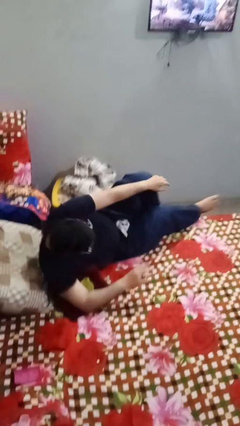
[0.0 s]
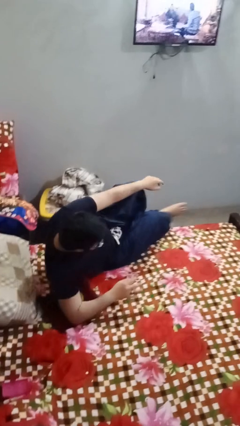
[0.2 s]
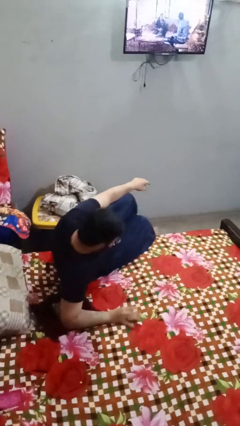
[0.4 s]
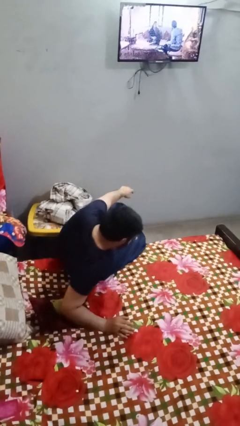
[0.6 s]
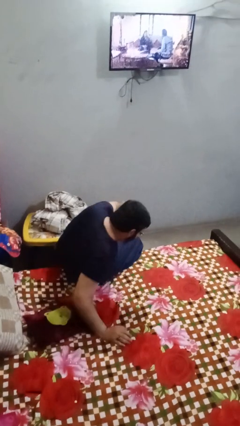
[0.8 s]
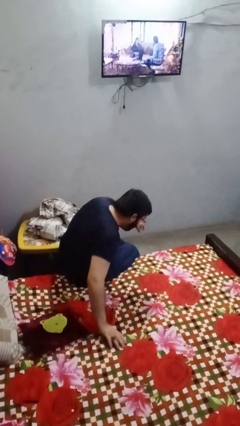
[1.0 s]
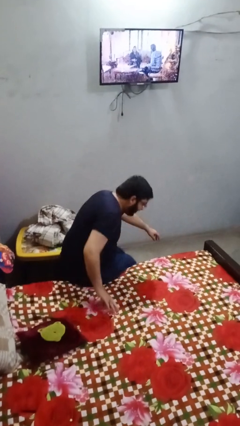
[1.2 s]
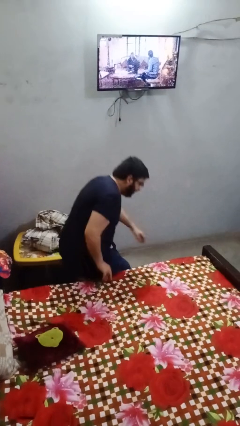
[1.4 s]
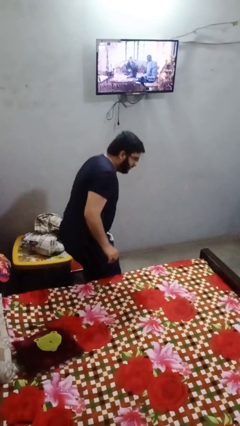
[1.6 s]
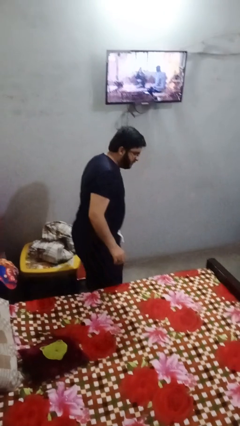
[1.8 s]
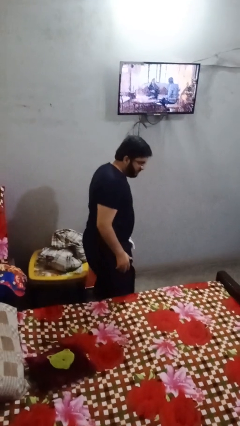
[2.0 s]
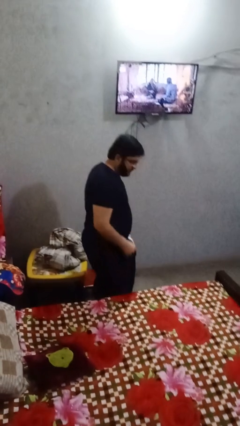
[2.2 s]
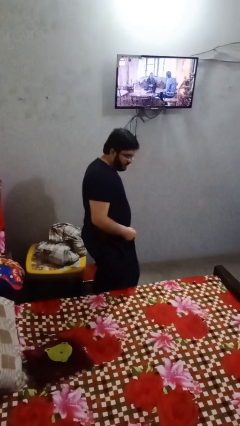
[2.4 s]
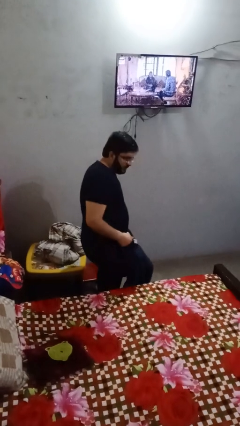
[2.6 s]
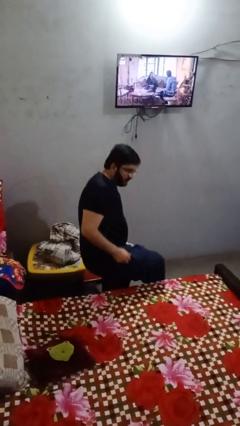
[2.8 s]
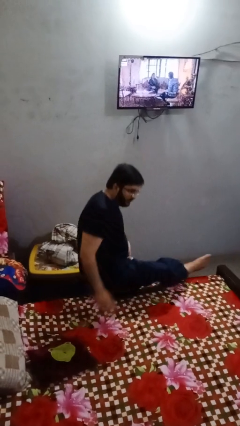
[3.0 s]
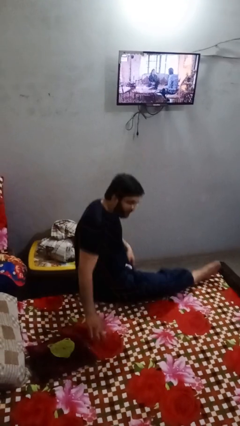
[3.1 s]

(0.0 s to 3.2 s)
person stands up

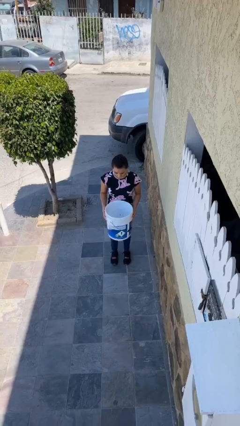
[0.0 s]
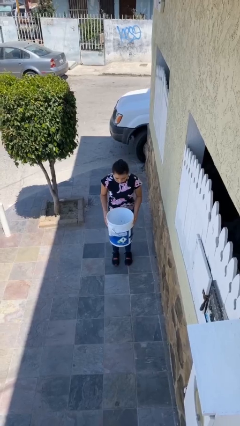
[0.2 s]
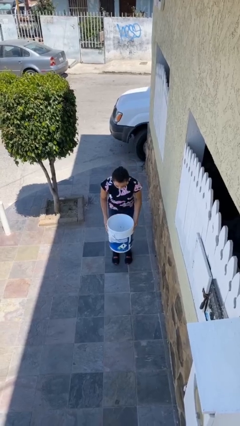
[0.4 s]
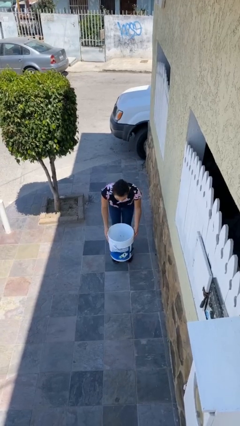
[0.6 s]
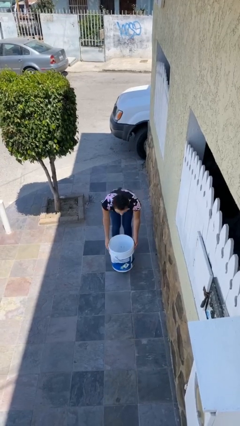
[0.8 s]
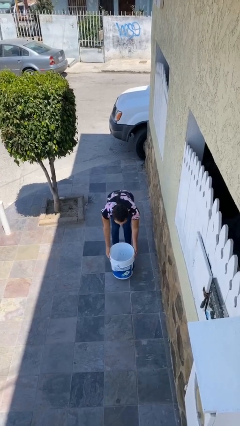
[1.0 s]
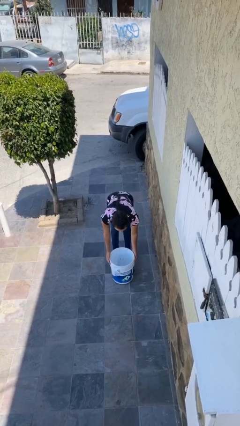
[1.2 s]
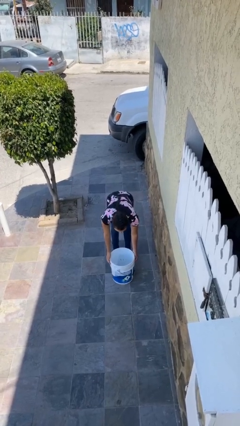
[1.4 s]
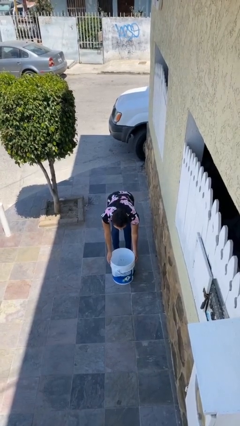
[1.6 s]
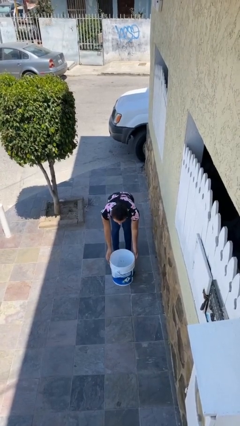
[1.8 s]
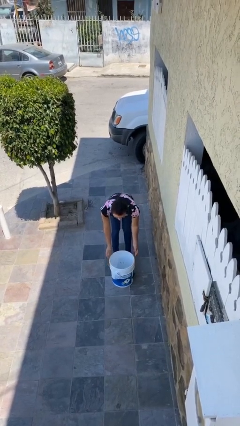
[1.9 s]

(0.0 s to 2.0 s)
person puts down object on floor

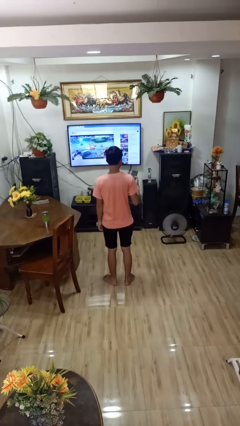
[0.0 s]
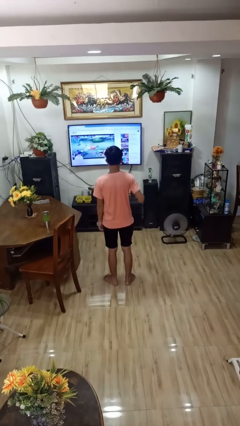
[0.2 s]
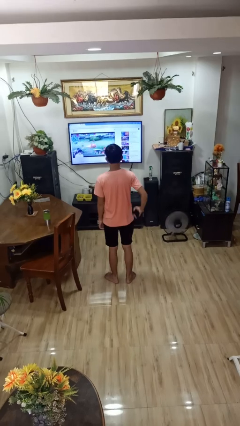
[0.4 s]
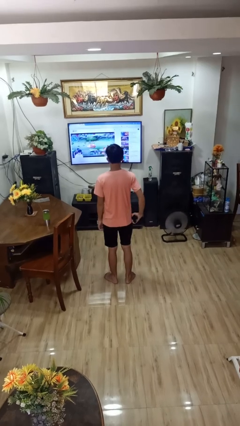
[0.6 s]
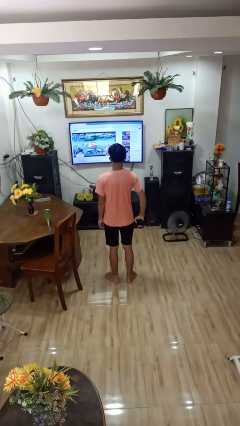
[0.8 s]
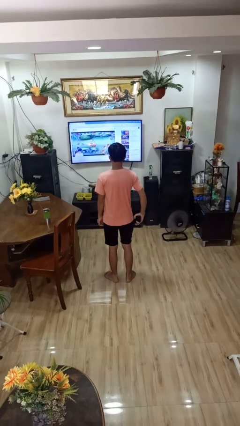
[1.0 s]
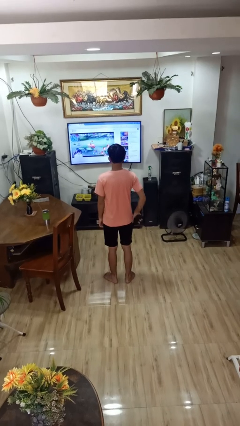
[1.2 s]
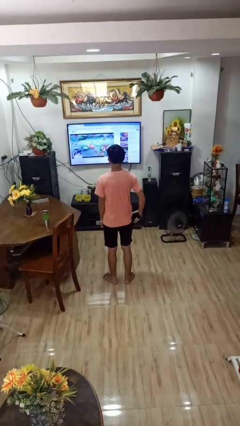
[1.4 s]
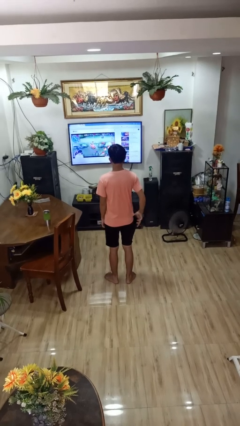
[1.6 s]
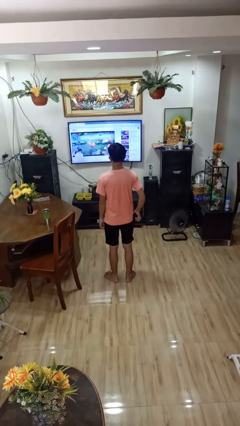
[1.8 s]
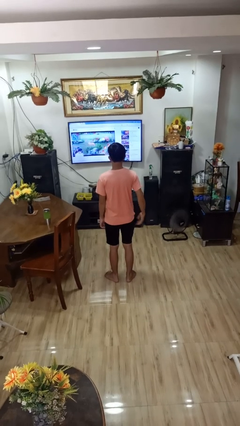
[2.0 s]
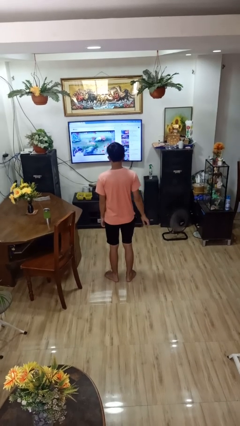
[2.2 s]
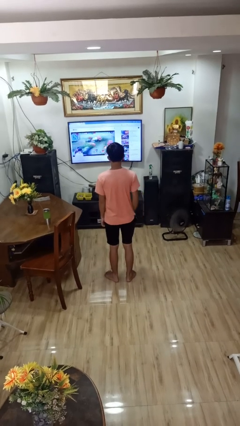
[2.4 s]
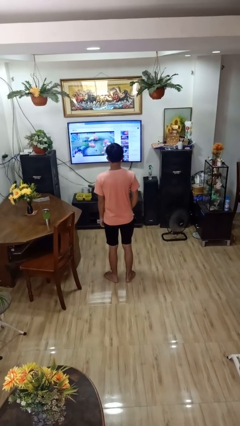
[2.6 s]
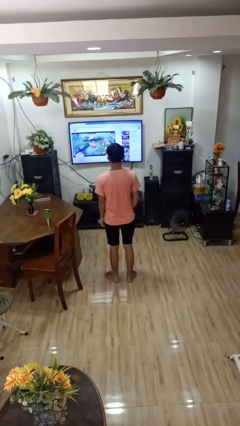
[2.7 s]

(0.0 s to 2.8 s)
person puts phone into pocket

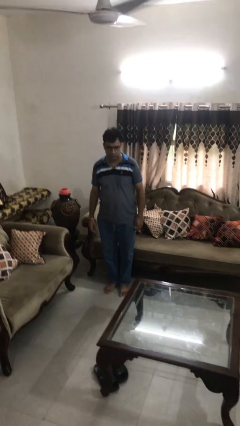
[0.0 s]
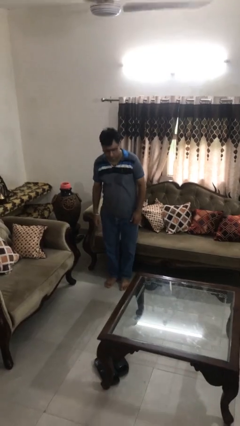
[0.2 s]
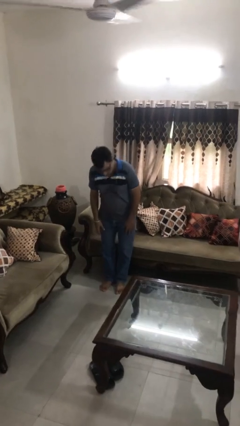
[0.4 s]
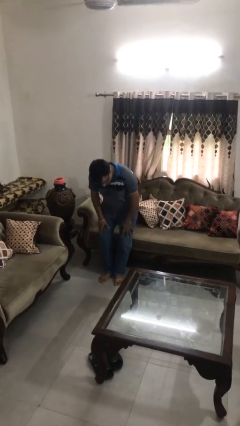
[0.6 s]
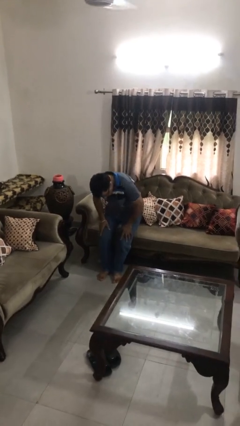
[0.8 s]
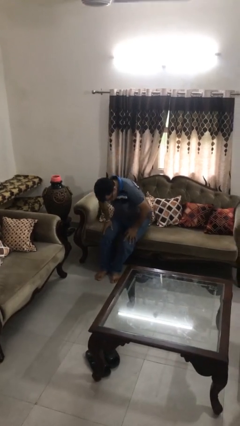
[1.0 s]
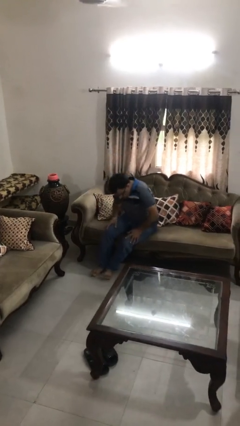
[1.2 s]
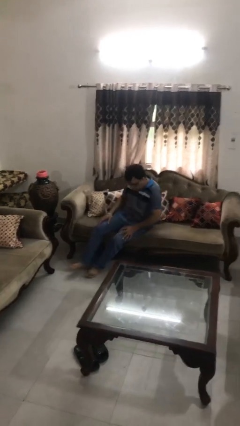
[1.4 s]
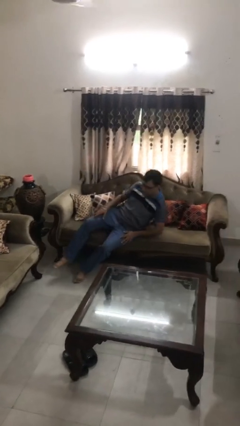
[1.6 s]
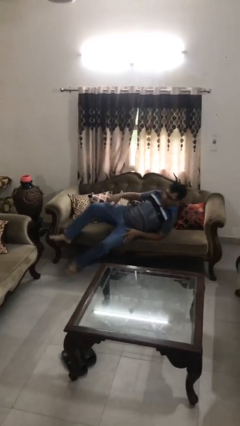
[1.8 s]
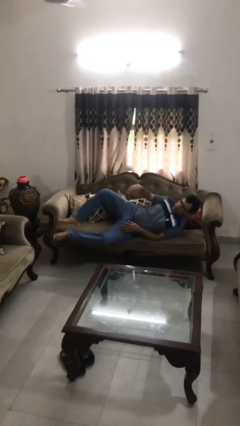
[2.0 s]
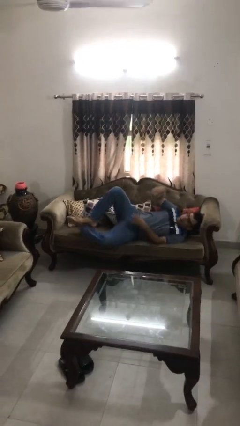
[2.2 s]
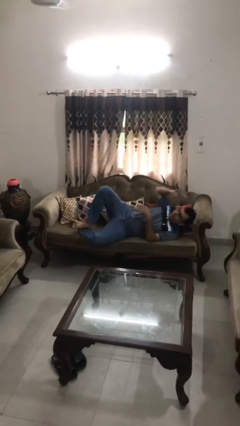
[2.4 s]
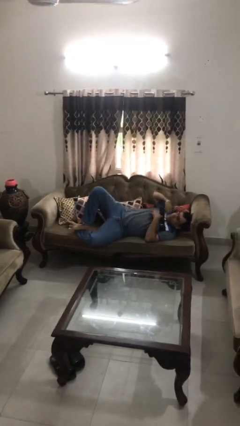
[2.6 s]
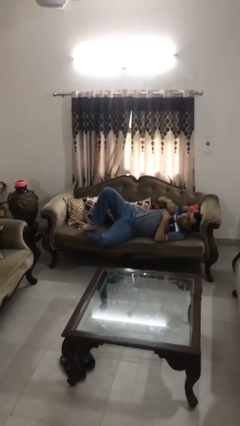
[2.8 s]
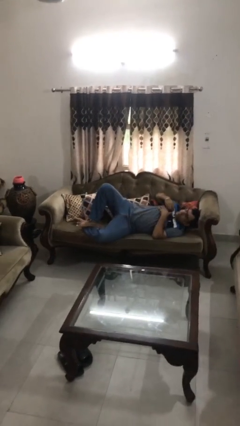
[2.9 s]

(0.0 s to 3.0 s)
person lies down on couch

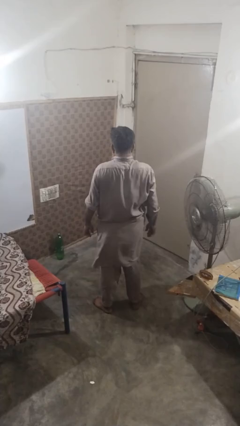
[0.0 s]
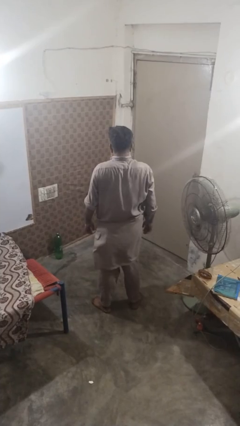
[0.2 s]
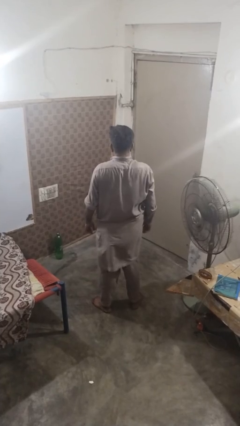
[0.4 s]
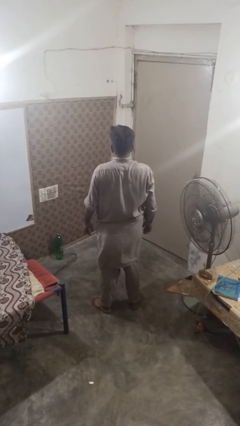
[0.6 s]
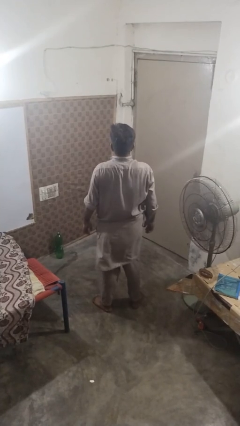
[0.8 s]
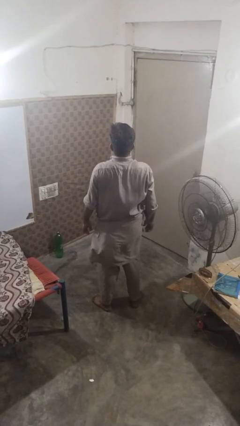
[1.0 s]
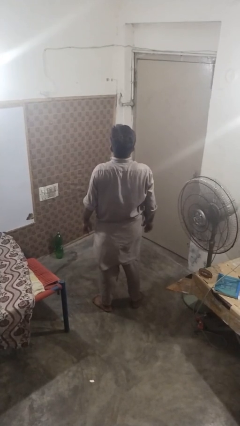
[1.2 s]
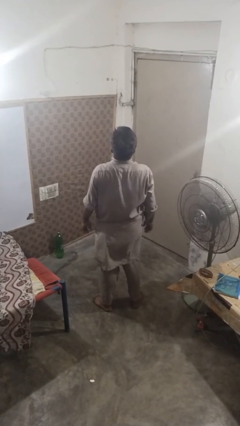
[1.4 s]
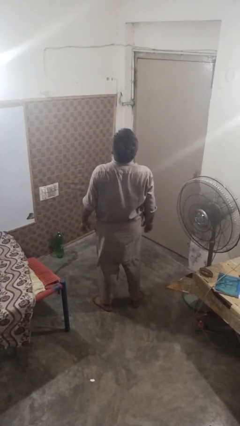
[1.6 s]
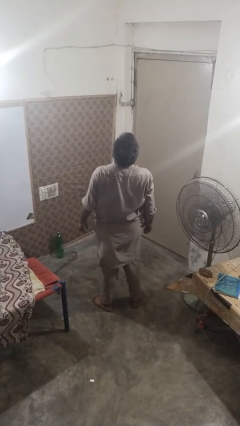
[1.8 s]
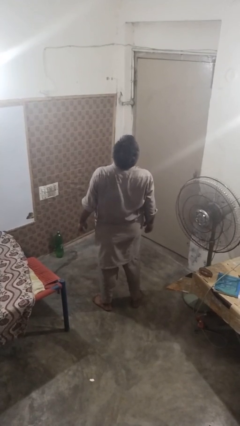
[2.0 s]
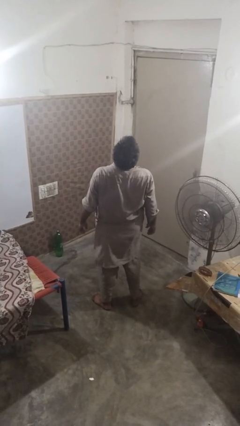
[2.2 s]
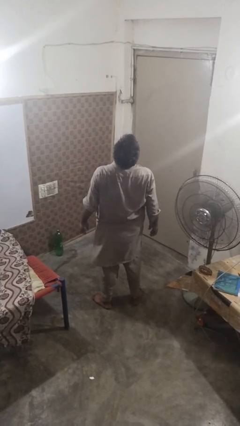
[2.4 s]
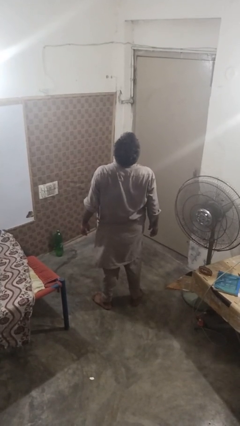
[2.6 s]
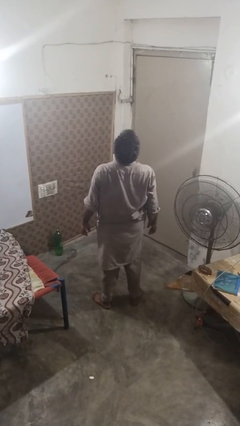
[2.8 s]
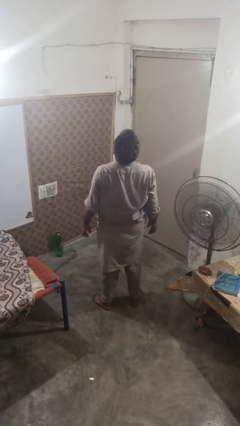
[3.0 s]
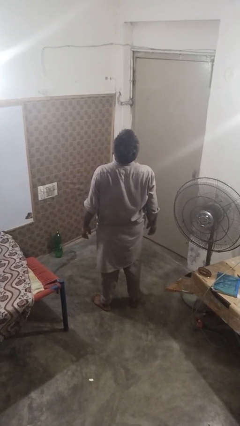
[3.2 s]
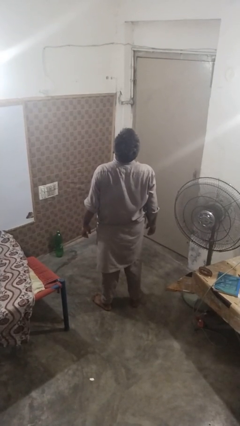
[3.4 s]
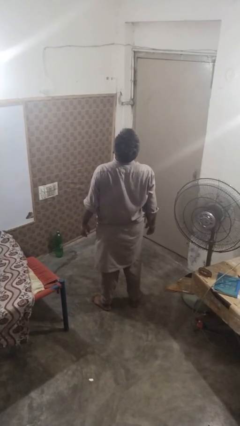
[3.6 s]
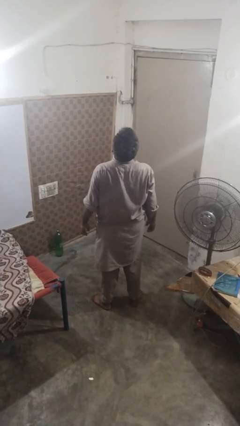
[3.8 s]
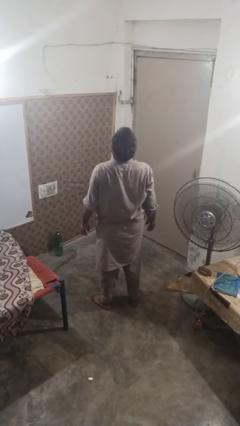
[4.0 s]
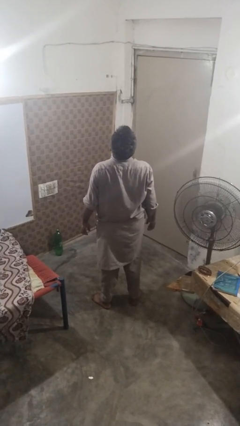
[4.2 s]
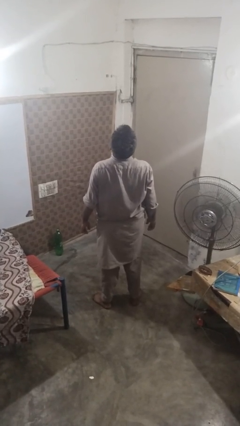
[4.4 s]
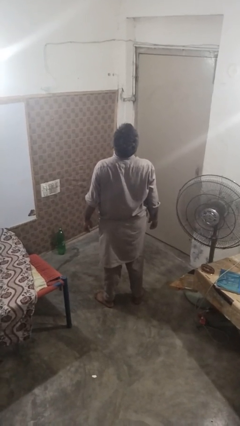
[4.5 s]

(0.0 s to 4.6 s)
person stretches back

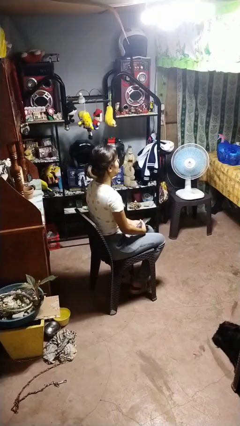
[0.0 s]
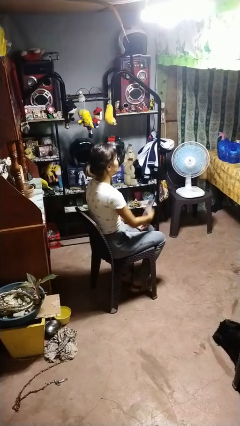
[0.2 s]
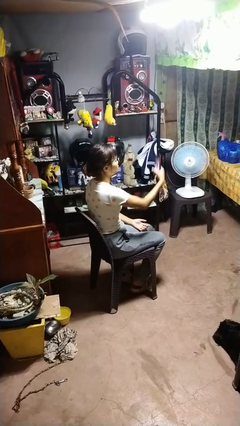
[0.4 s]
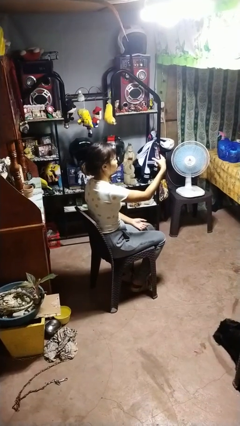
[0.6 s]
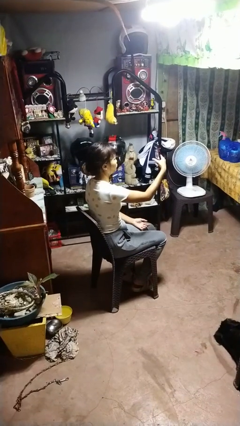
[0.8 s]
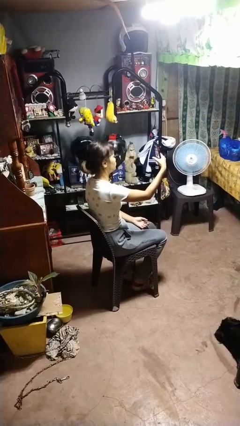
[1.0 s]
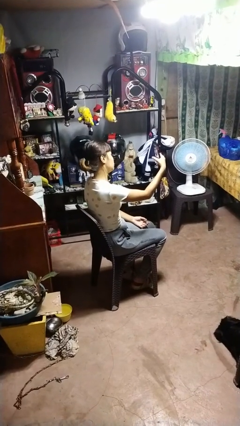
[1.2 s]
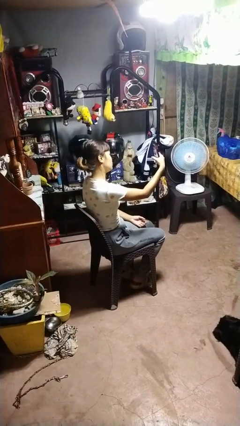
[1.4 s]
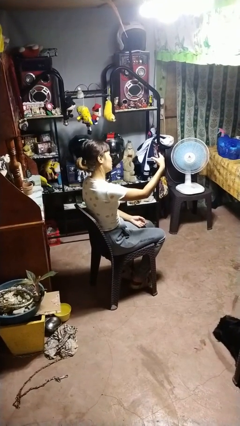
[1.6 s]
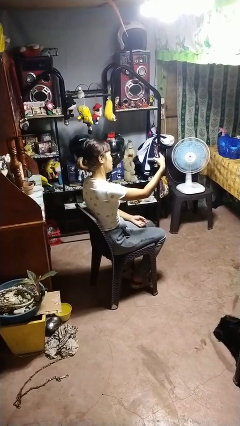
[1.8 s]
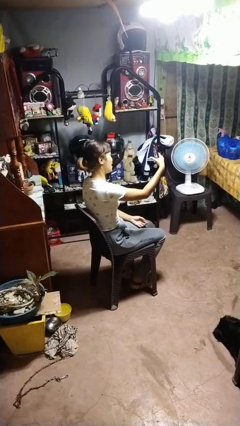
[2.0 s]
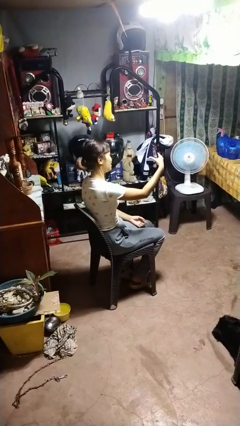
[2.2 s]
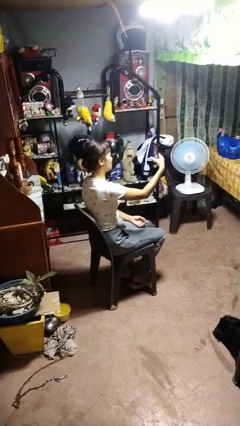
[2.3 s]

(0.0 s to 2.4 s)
person takes selfie
